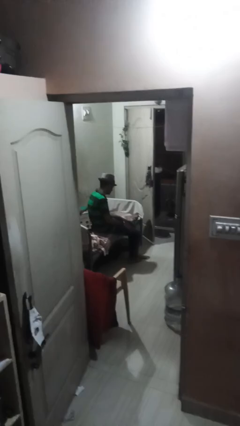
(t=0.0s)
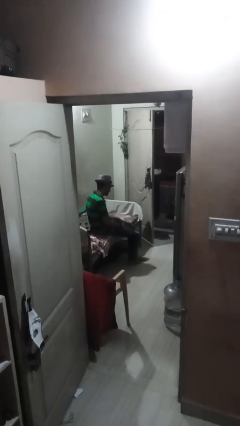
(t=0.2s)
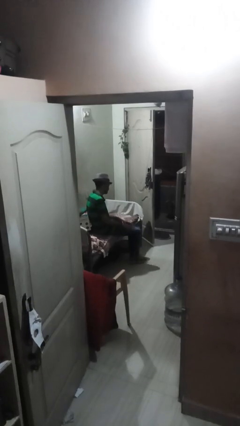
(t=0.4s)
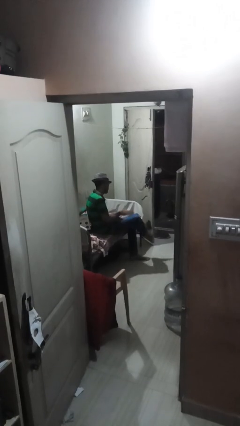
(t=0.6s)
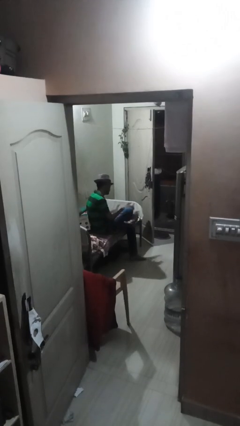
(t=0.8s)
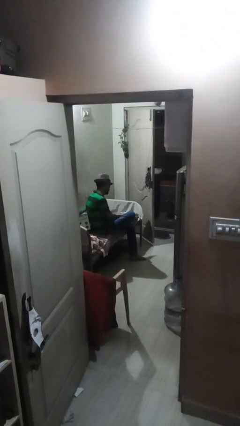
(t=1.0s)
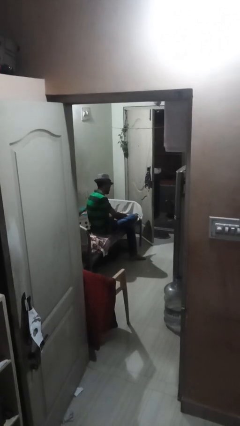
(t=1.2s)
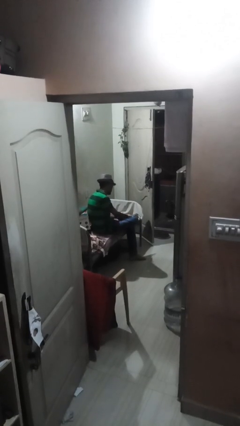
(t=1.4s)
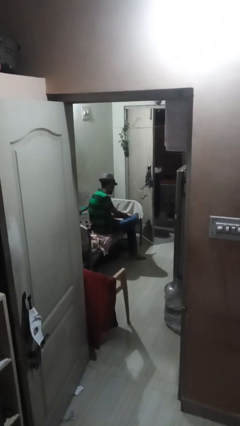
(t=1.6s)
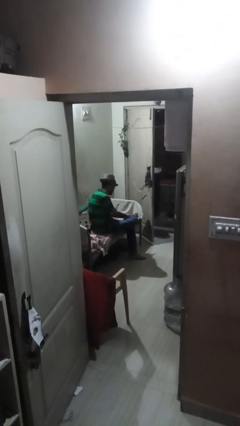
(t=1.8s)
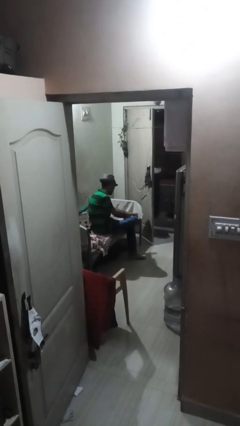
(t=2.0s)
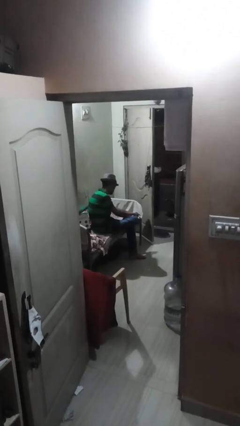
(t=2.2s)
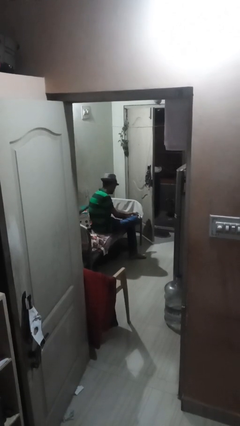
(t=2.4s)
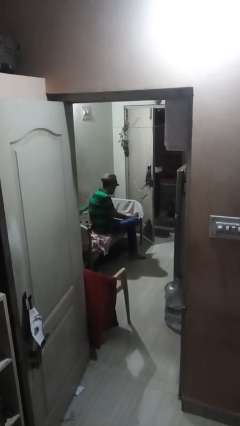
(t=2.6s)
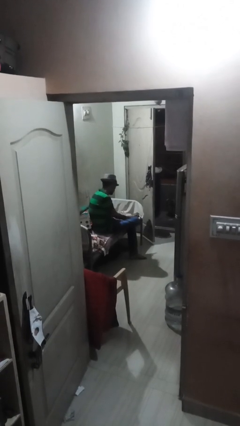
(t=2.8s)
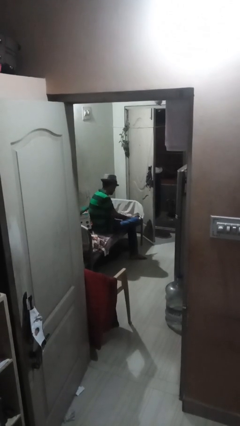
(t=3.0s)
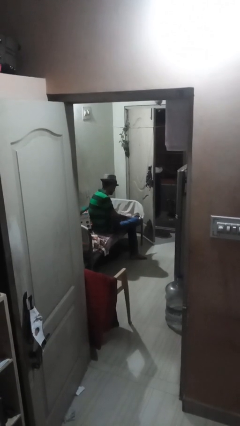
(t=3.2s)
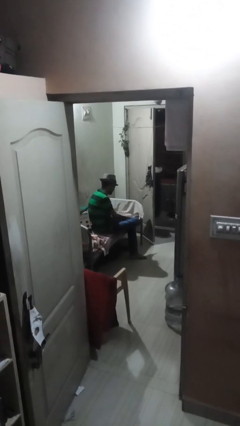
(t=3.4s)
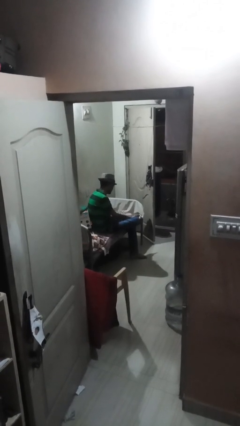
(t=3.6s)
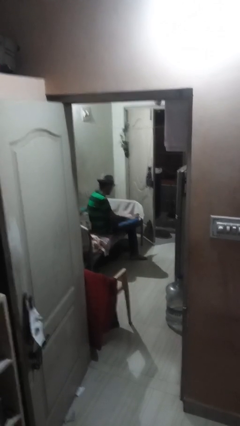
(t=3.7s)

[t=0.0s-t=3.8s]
person rubs foot

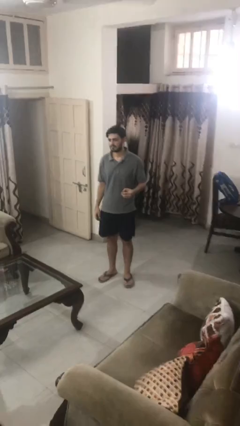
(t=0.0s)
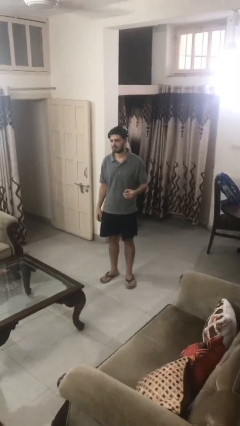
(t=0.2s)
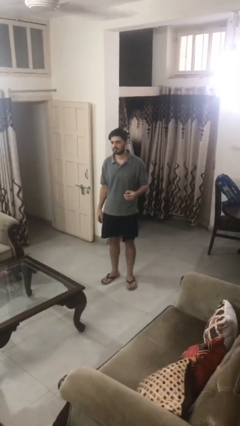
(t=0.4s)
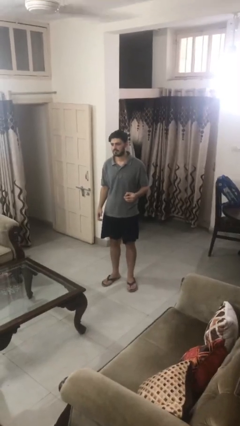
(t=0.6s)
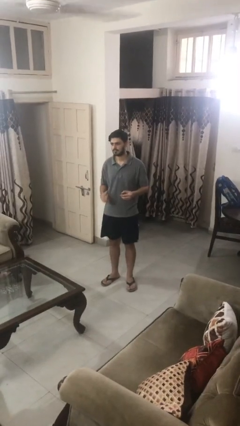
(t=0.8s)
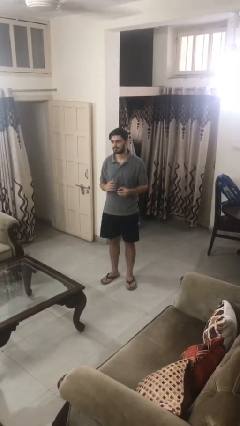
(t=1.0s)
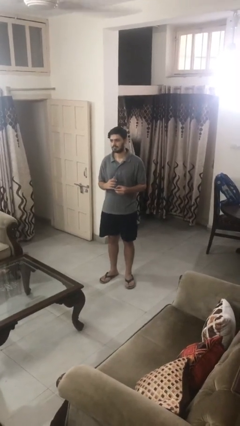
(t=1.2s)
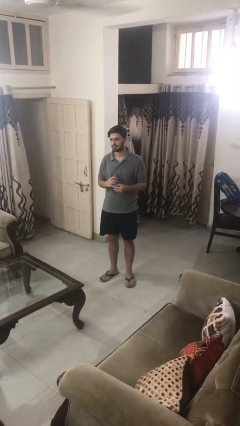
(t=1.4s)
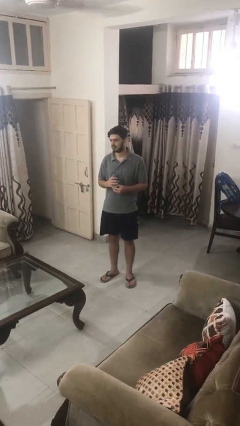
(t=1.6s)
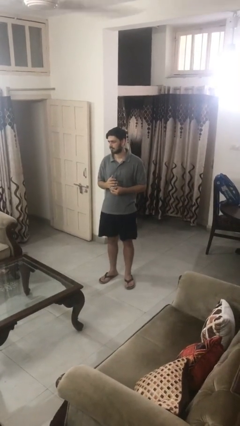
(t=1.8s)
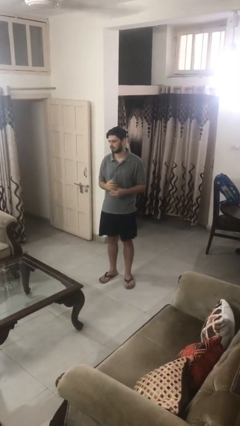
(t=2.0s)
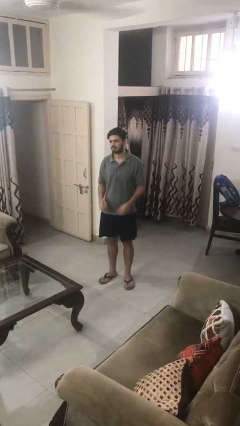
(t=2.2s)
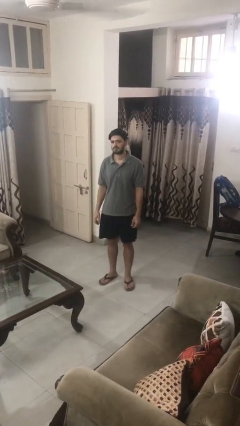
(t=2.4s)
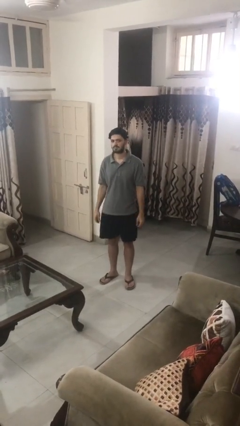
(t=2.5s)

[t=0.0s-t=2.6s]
person puts on ring

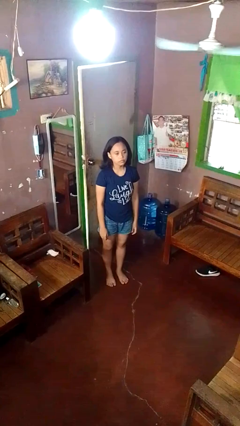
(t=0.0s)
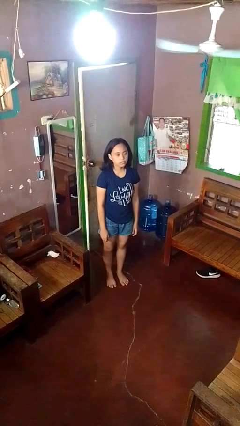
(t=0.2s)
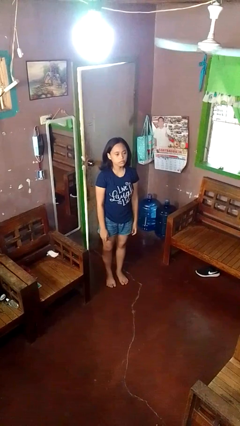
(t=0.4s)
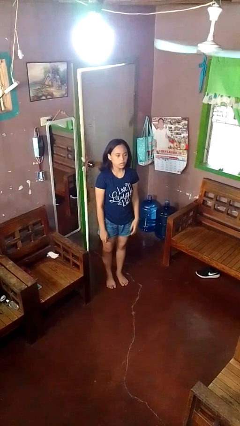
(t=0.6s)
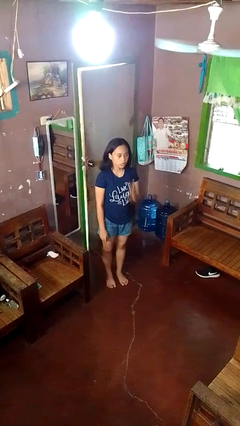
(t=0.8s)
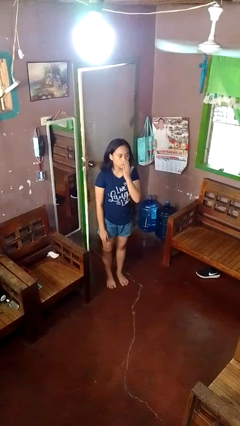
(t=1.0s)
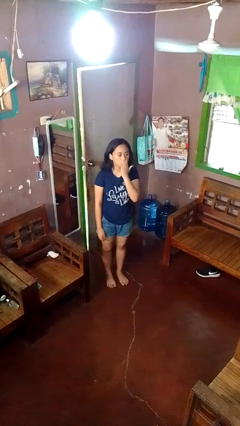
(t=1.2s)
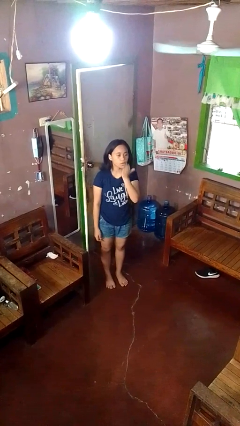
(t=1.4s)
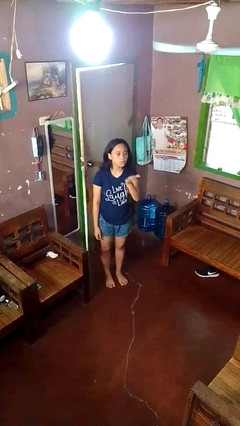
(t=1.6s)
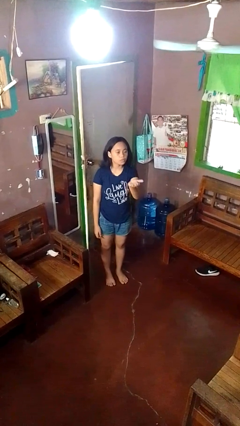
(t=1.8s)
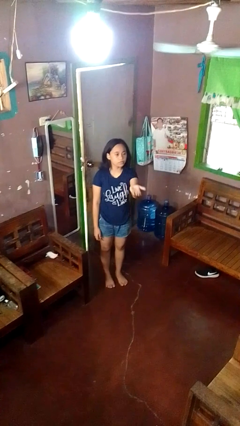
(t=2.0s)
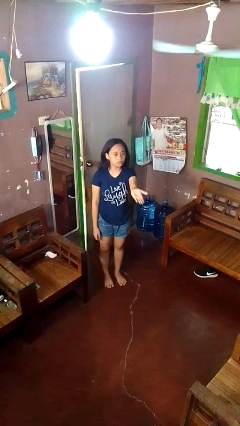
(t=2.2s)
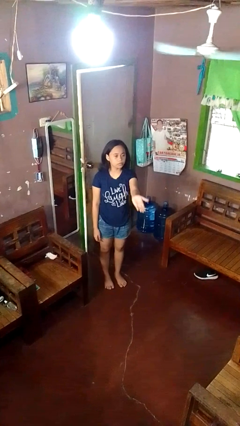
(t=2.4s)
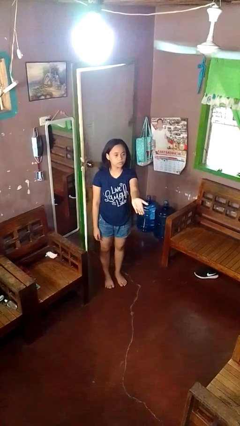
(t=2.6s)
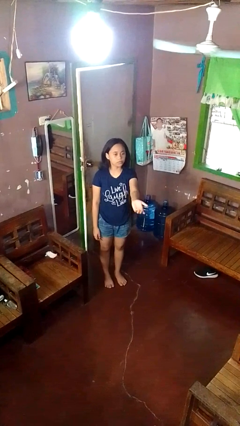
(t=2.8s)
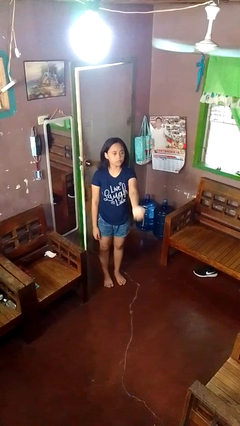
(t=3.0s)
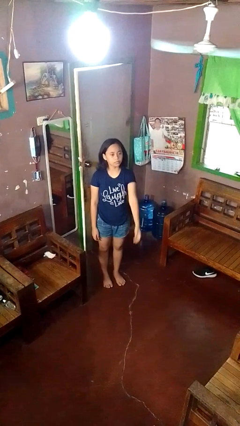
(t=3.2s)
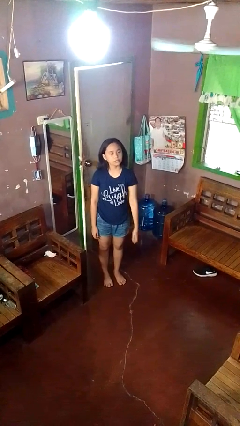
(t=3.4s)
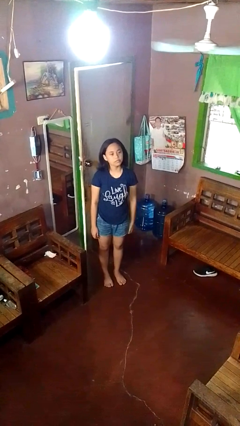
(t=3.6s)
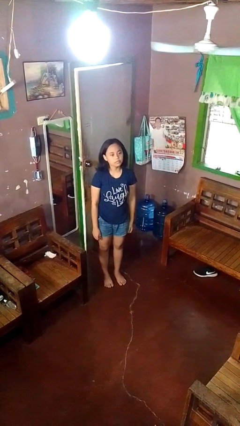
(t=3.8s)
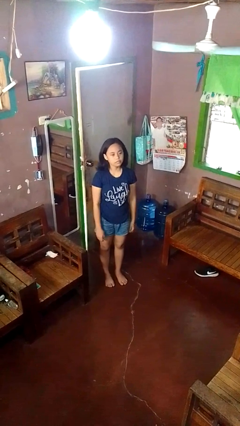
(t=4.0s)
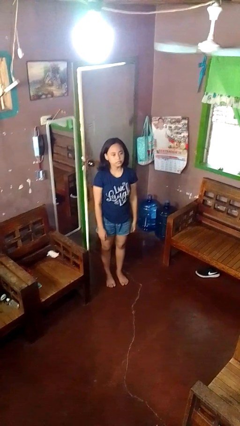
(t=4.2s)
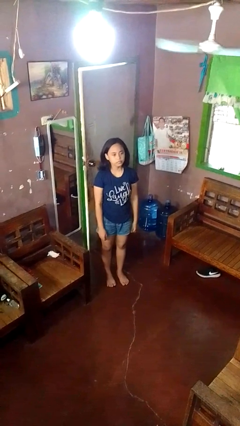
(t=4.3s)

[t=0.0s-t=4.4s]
person gestures blow kiss

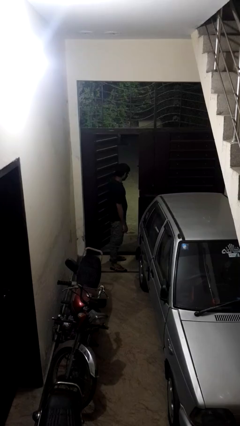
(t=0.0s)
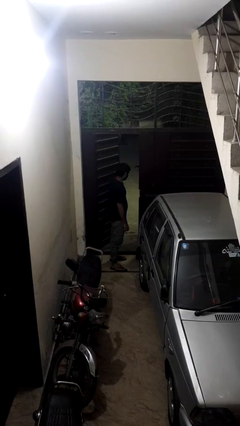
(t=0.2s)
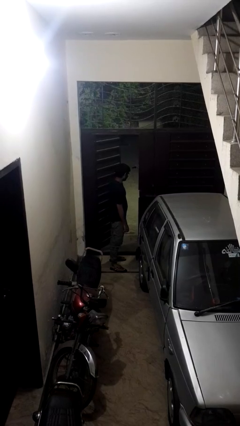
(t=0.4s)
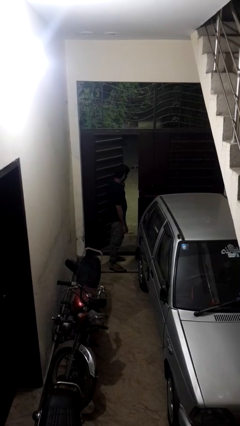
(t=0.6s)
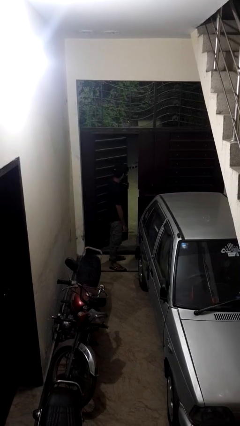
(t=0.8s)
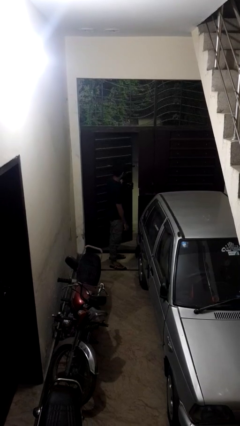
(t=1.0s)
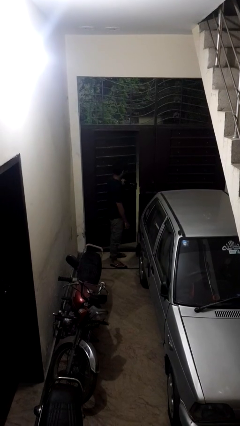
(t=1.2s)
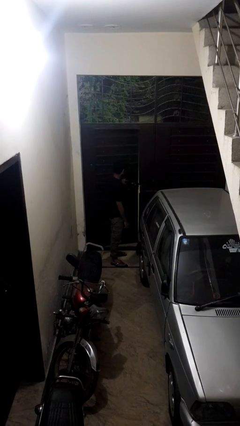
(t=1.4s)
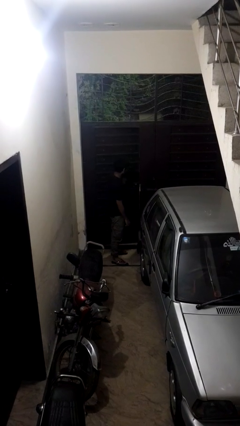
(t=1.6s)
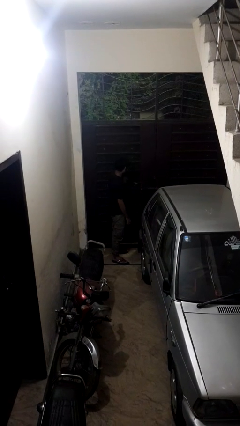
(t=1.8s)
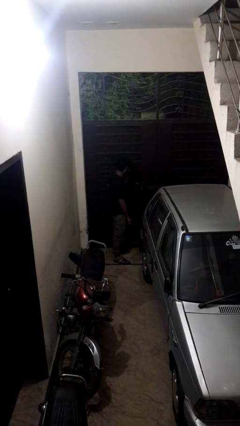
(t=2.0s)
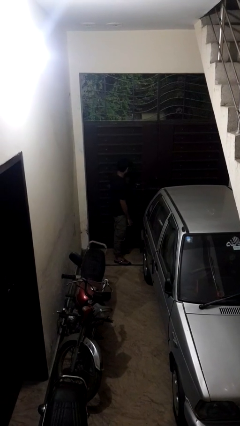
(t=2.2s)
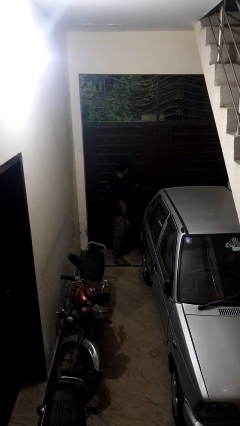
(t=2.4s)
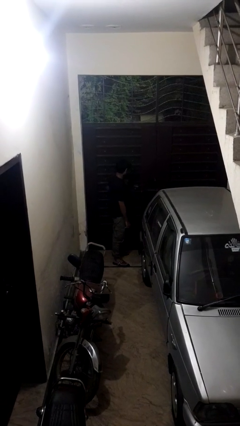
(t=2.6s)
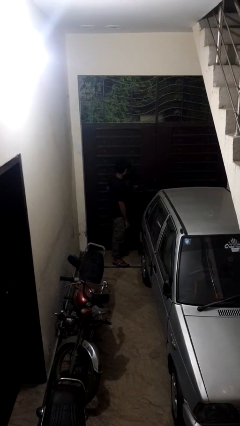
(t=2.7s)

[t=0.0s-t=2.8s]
person closes gate

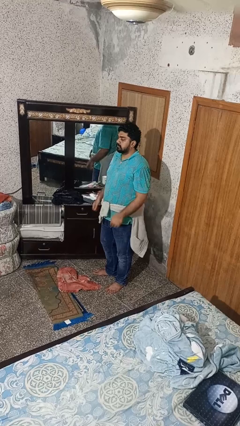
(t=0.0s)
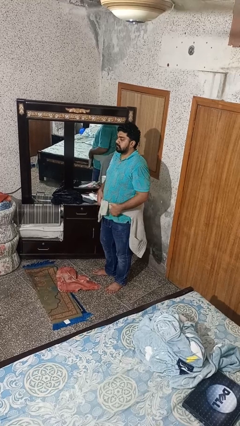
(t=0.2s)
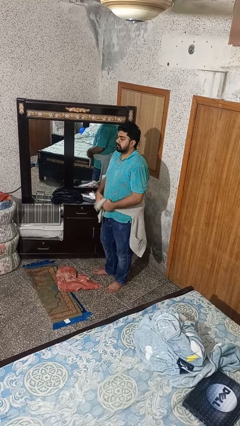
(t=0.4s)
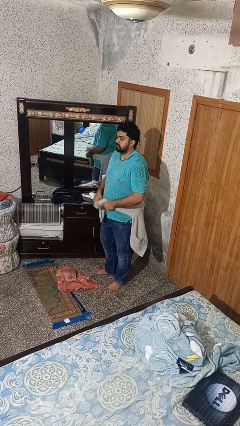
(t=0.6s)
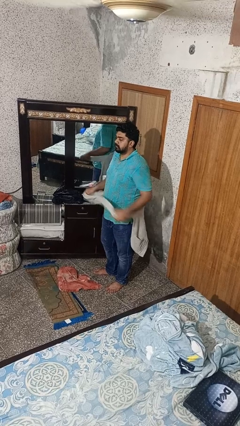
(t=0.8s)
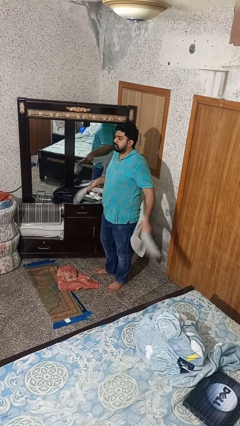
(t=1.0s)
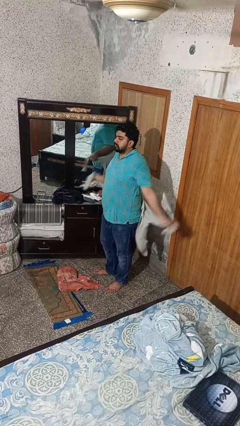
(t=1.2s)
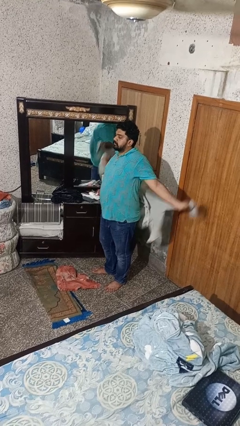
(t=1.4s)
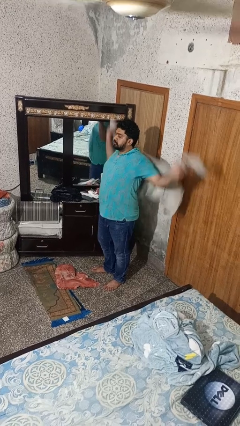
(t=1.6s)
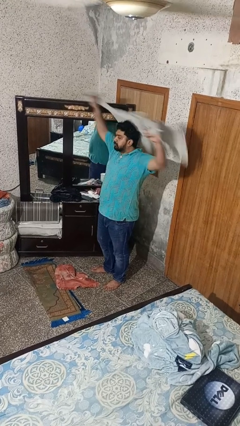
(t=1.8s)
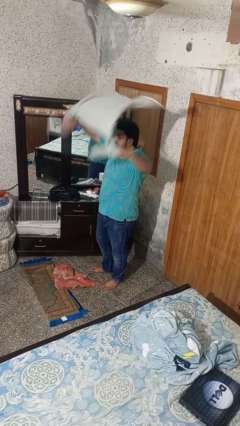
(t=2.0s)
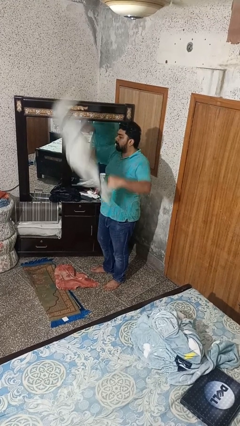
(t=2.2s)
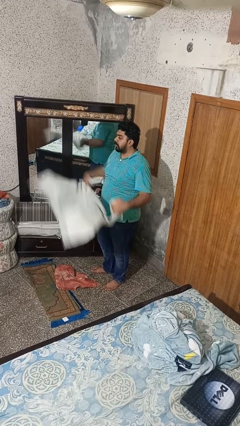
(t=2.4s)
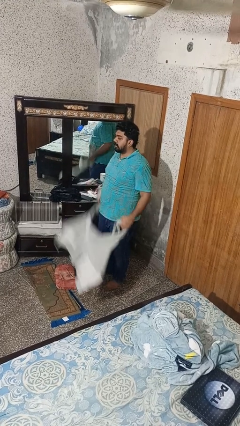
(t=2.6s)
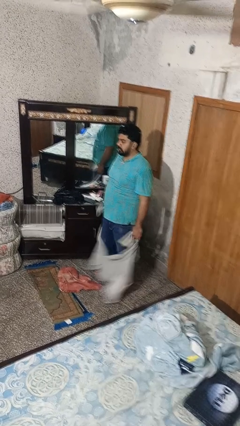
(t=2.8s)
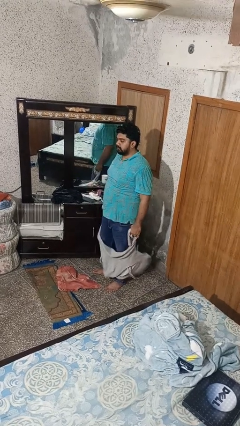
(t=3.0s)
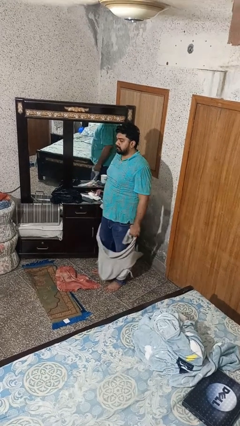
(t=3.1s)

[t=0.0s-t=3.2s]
person unties jacket around waist

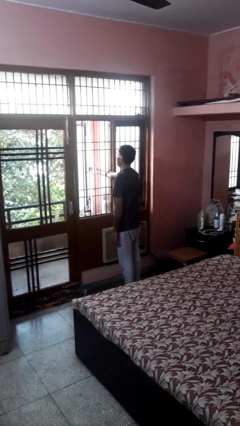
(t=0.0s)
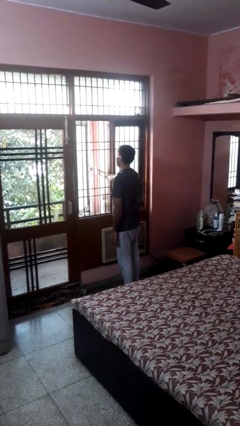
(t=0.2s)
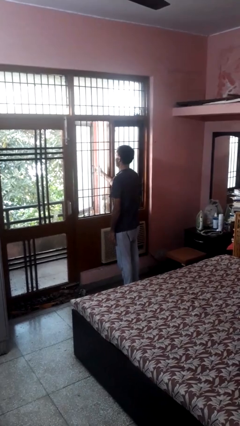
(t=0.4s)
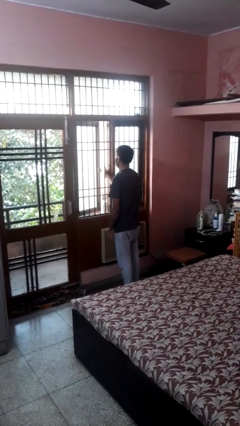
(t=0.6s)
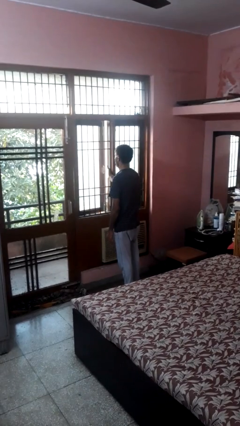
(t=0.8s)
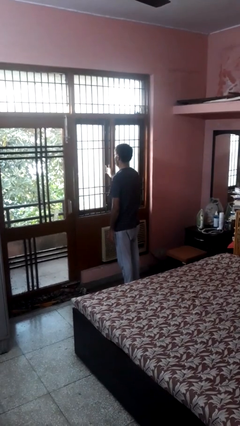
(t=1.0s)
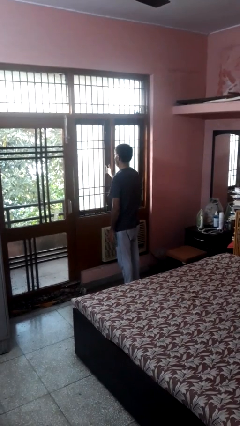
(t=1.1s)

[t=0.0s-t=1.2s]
person closes home window
